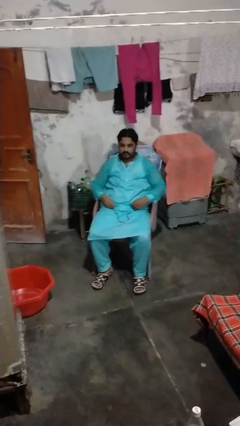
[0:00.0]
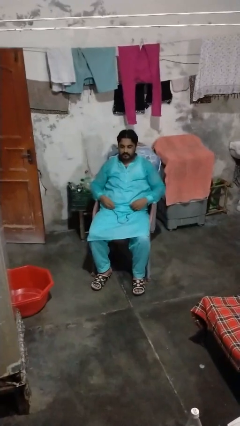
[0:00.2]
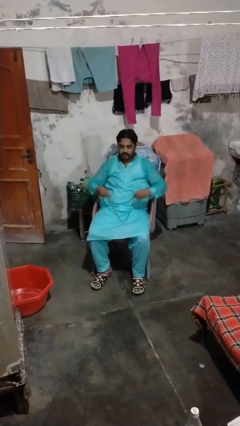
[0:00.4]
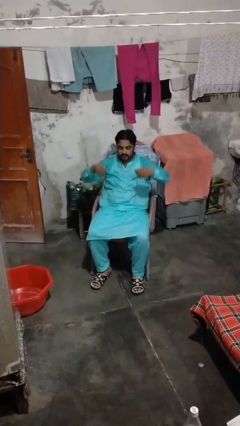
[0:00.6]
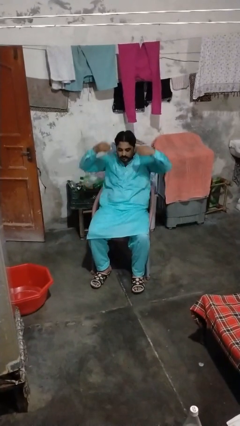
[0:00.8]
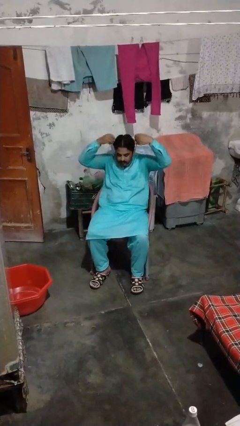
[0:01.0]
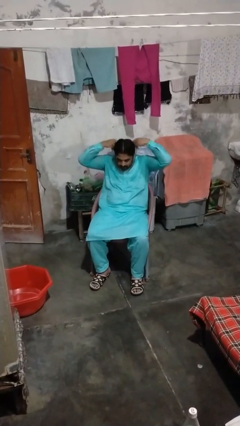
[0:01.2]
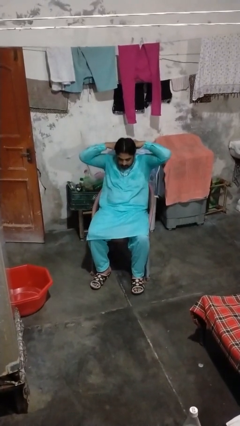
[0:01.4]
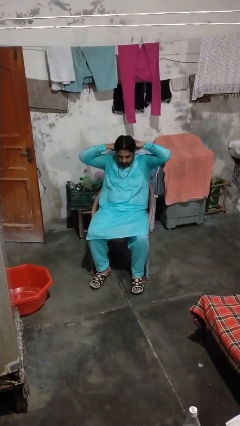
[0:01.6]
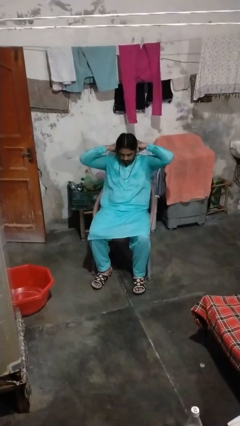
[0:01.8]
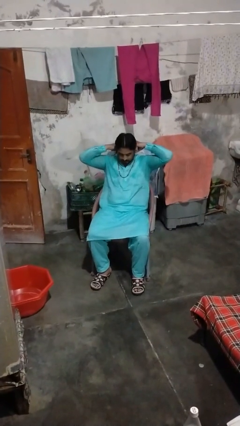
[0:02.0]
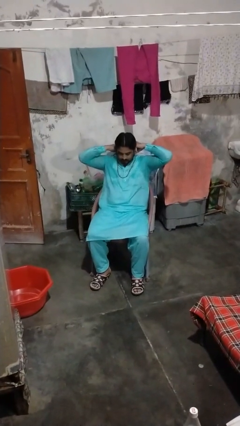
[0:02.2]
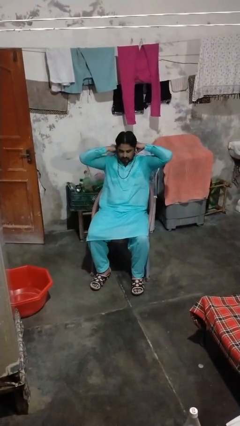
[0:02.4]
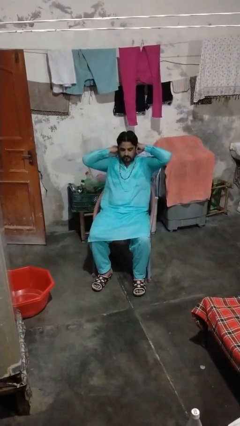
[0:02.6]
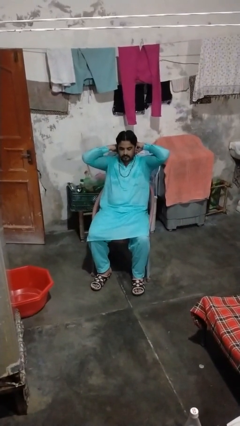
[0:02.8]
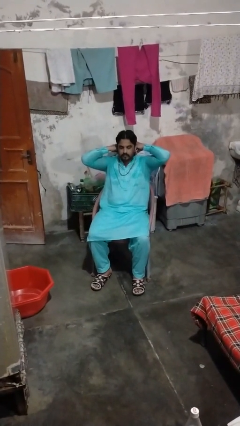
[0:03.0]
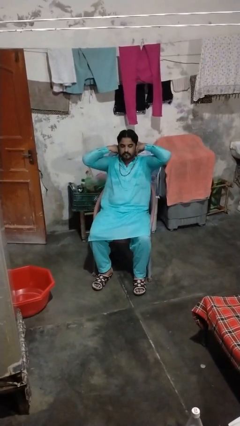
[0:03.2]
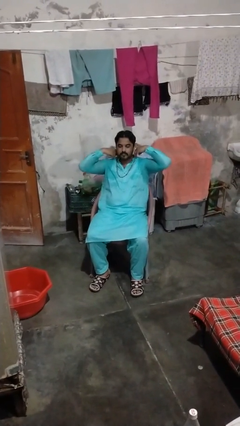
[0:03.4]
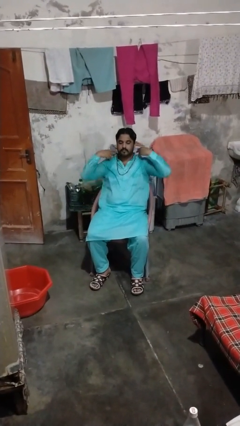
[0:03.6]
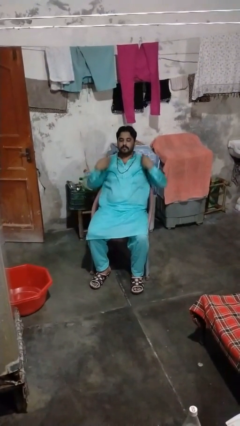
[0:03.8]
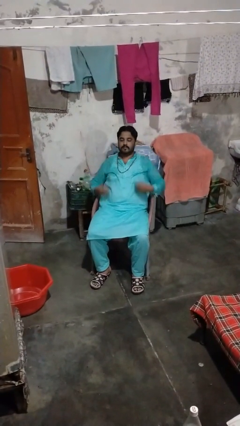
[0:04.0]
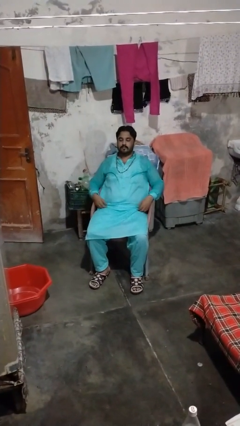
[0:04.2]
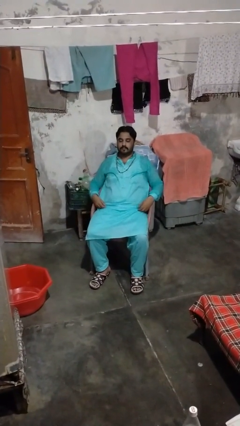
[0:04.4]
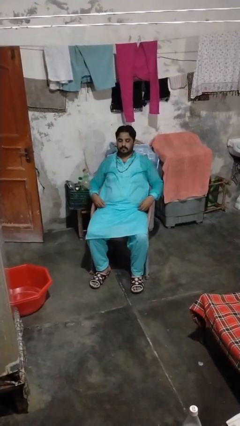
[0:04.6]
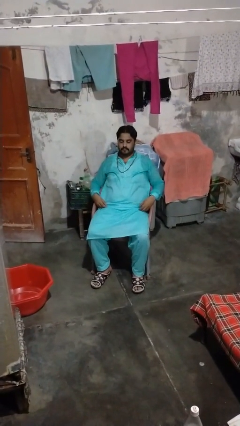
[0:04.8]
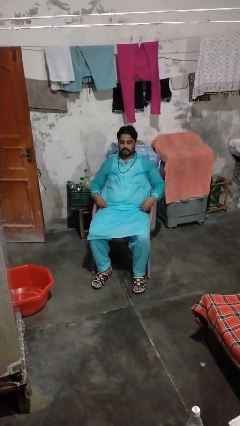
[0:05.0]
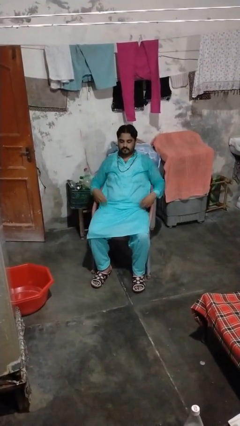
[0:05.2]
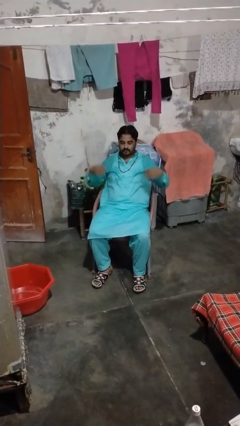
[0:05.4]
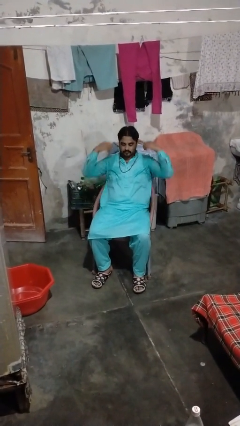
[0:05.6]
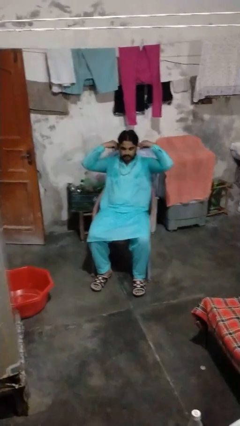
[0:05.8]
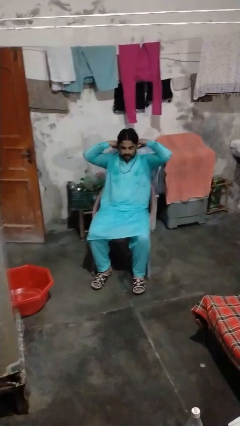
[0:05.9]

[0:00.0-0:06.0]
person puts on necklace

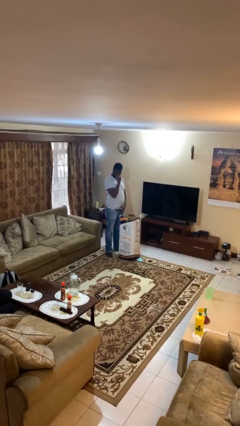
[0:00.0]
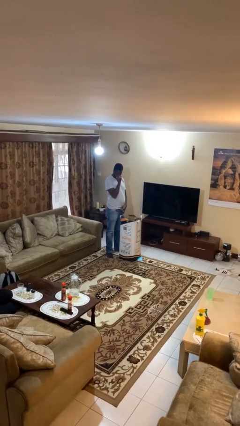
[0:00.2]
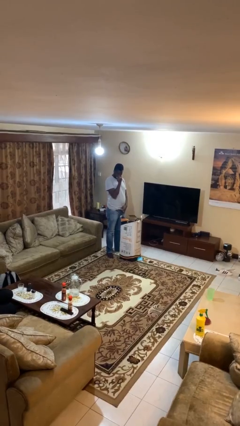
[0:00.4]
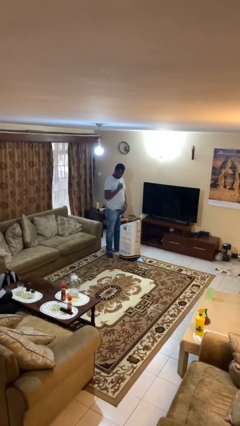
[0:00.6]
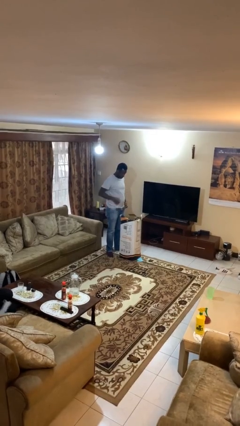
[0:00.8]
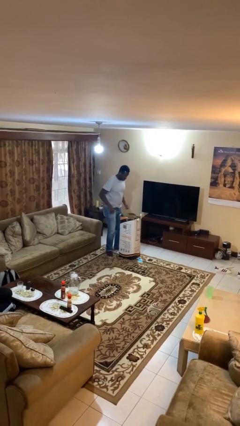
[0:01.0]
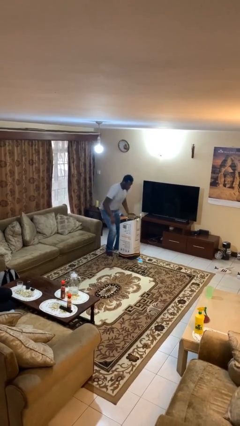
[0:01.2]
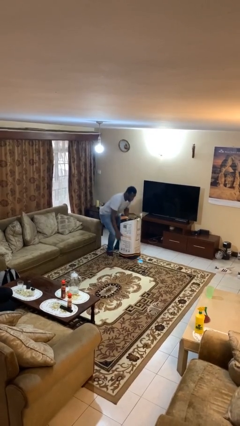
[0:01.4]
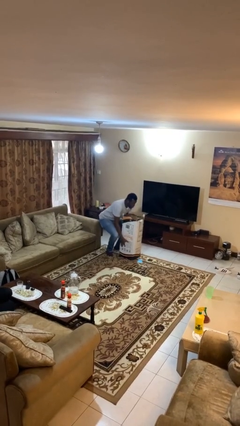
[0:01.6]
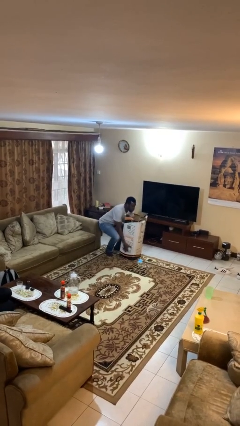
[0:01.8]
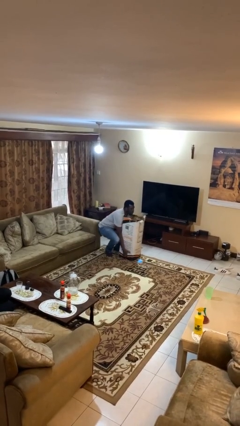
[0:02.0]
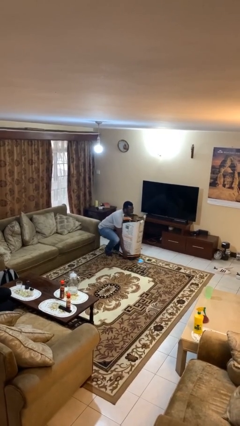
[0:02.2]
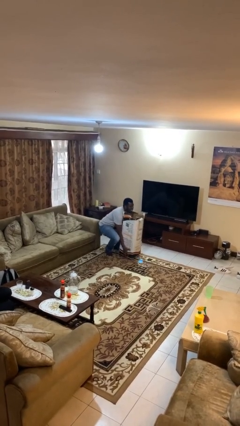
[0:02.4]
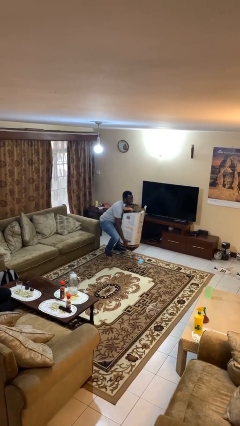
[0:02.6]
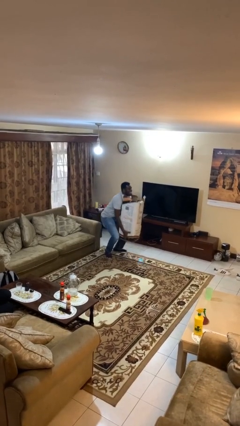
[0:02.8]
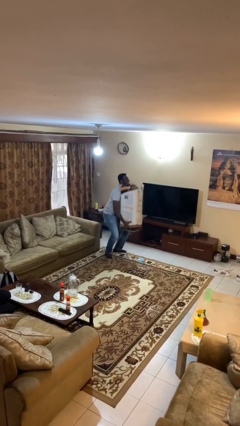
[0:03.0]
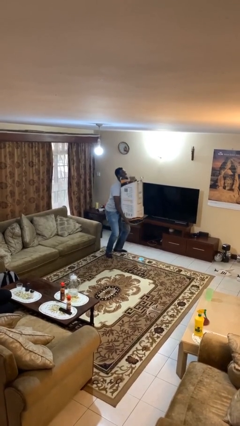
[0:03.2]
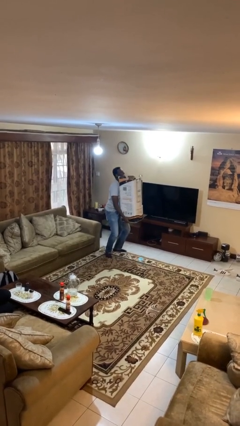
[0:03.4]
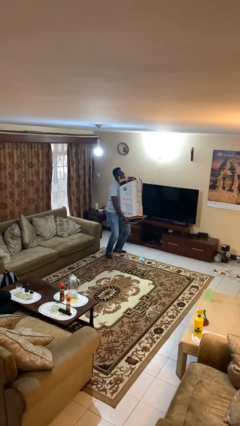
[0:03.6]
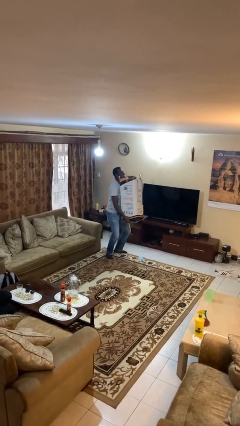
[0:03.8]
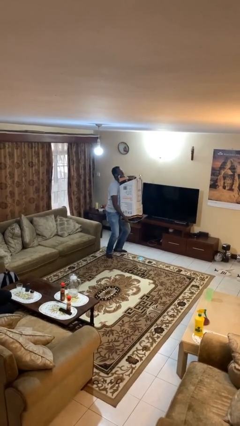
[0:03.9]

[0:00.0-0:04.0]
person picks up object from floor

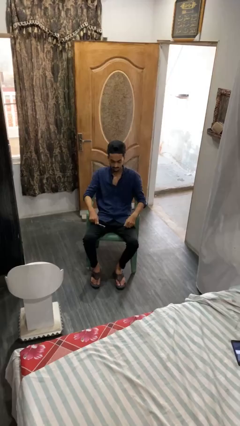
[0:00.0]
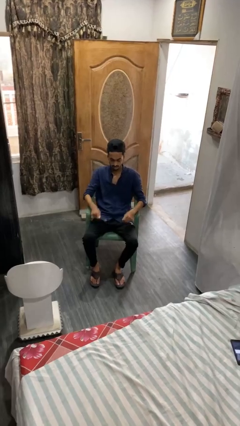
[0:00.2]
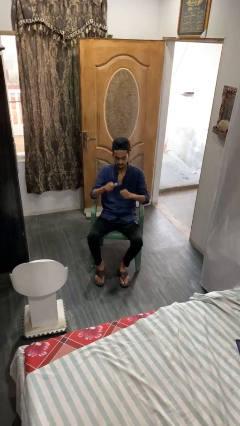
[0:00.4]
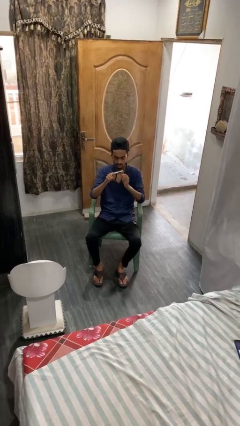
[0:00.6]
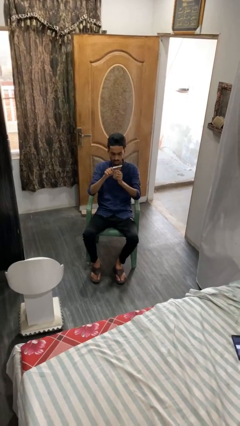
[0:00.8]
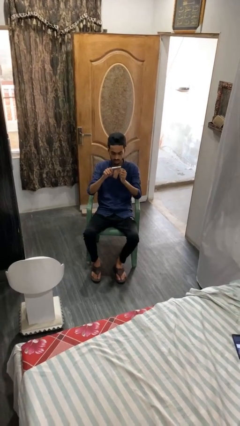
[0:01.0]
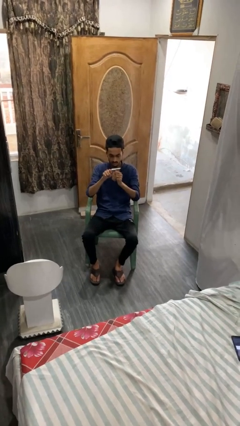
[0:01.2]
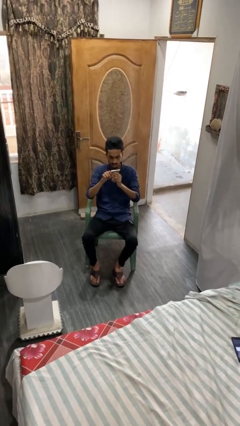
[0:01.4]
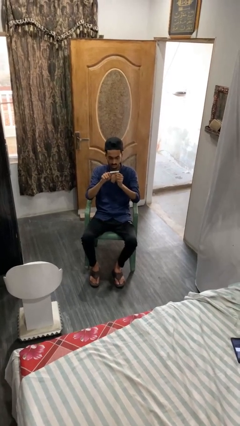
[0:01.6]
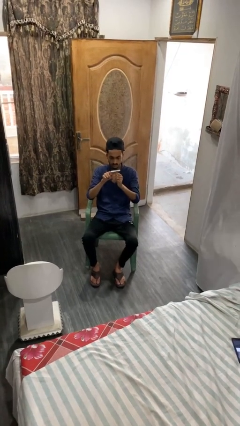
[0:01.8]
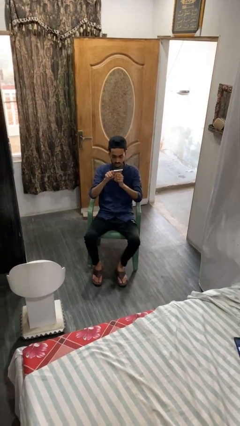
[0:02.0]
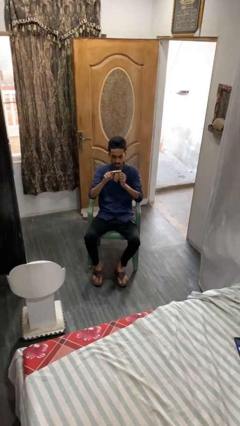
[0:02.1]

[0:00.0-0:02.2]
person files fingernails

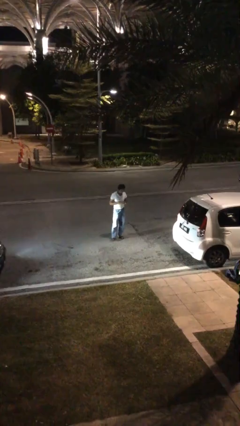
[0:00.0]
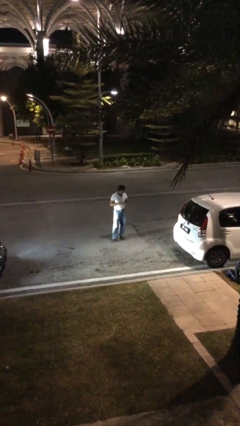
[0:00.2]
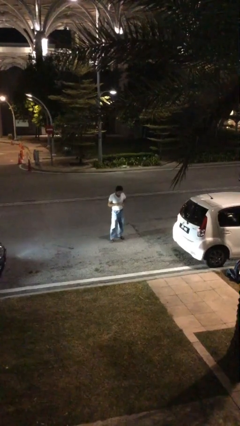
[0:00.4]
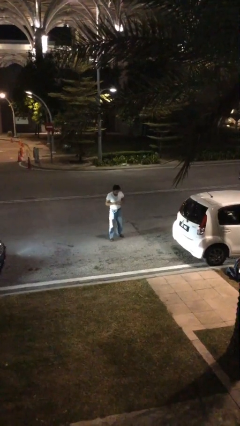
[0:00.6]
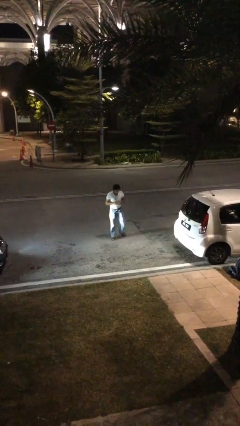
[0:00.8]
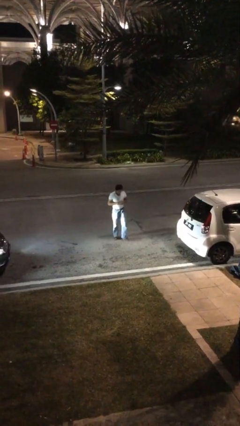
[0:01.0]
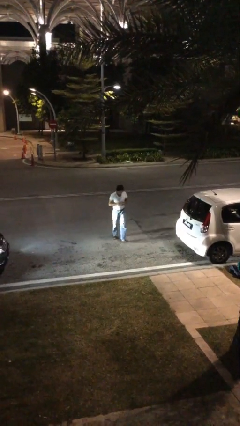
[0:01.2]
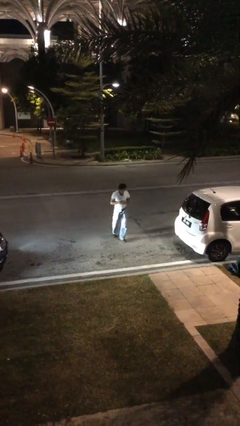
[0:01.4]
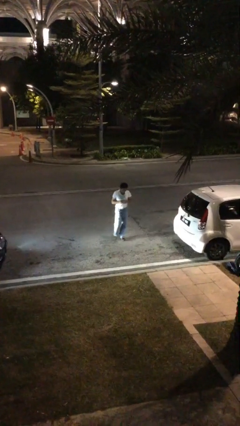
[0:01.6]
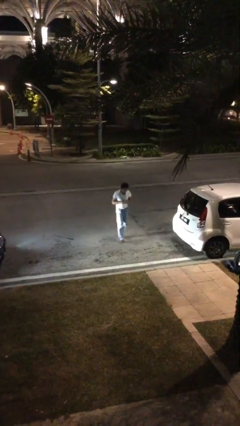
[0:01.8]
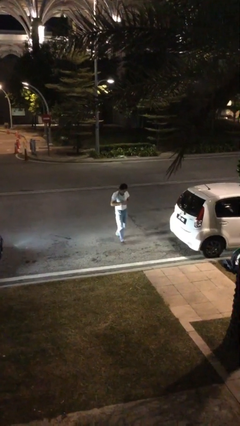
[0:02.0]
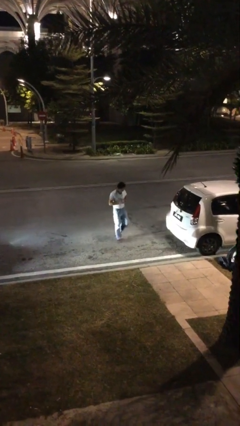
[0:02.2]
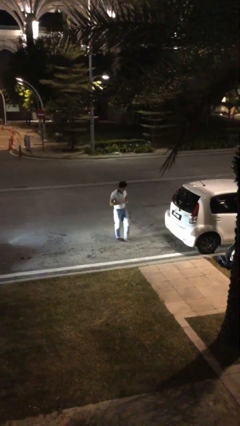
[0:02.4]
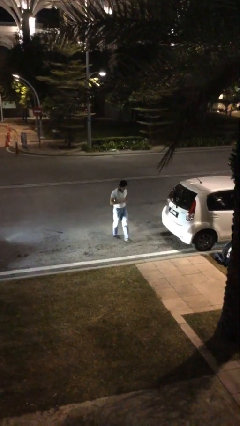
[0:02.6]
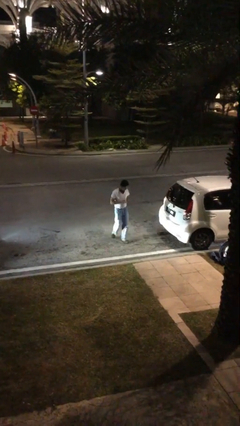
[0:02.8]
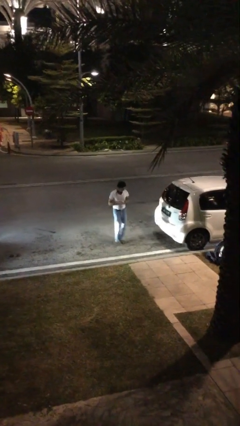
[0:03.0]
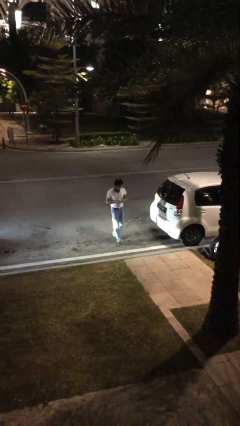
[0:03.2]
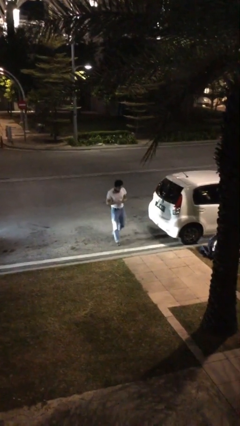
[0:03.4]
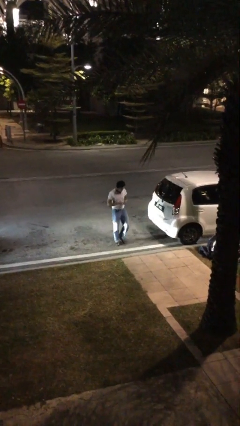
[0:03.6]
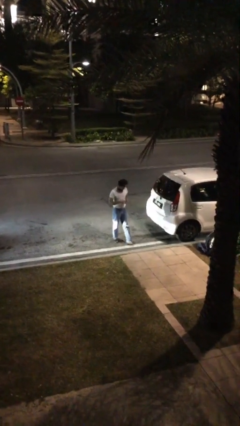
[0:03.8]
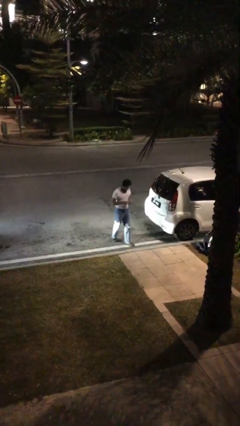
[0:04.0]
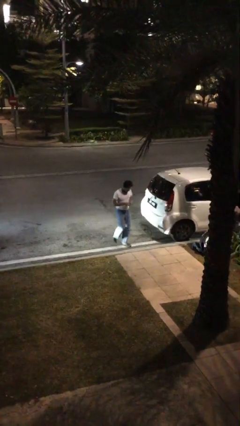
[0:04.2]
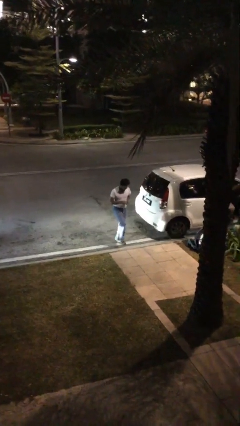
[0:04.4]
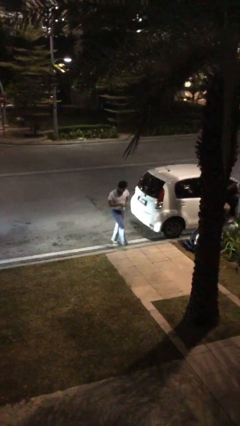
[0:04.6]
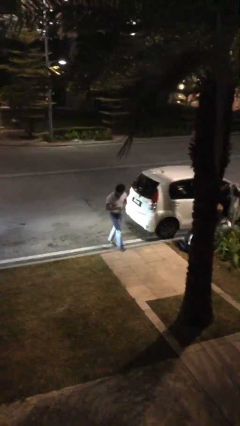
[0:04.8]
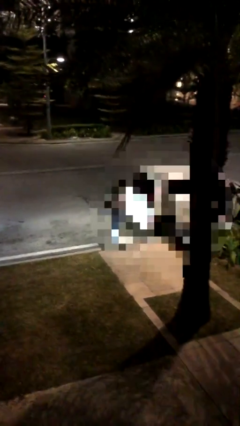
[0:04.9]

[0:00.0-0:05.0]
person texts on phone

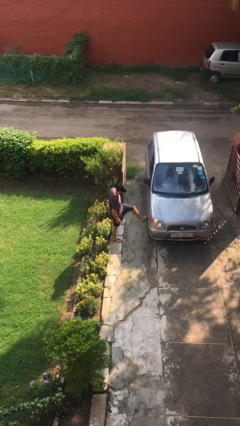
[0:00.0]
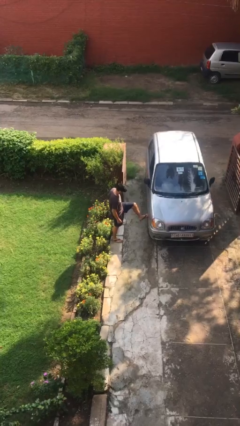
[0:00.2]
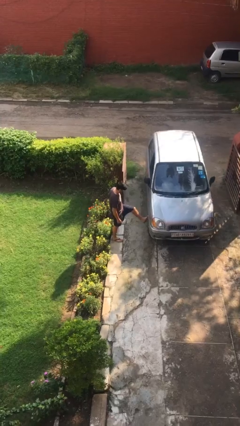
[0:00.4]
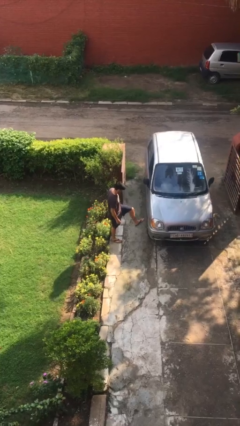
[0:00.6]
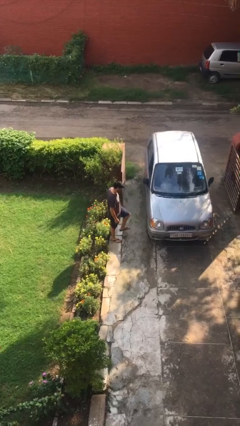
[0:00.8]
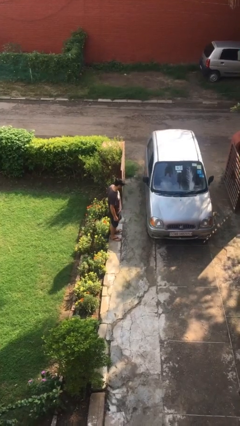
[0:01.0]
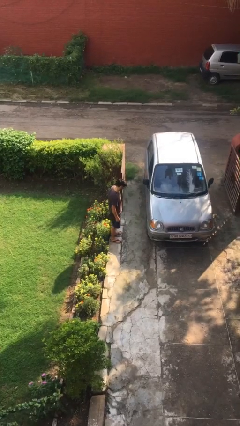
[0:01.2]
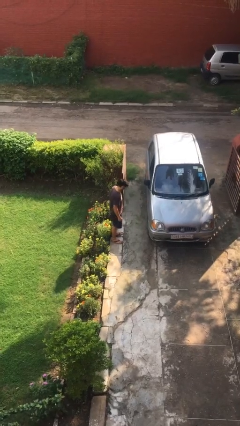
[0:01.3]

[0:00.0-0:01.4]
person kicks car tires
